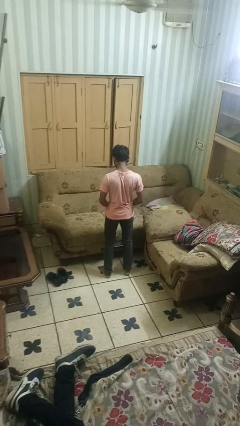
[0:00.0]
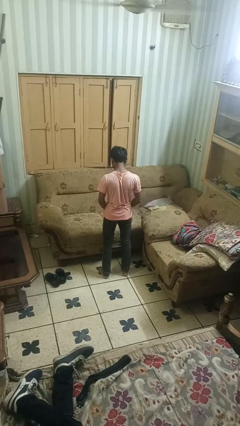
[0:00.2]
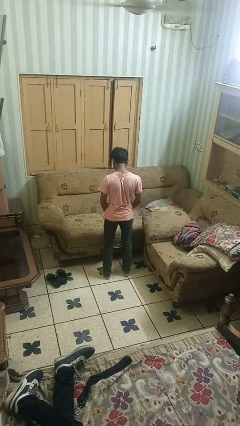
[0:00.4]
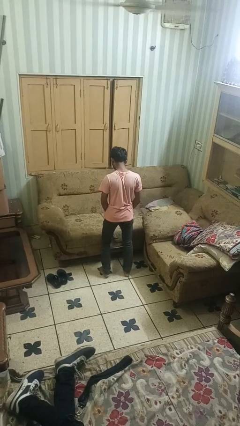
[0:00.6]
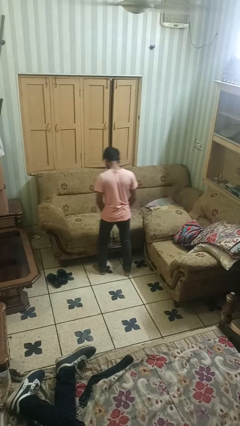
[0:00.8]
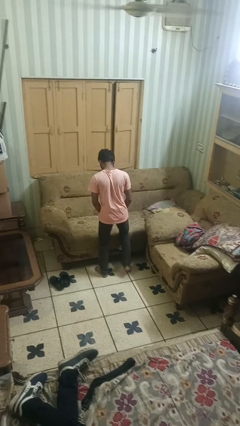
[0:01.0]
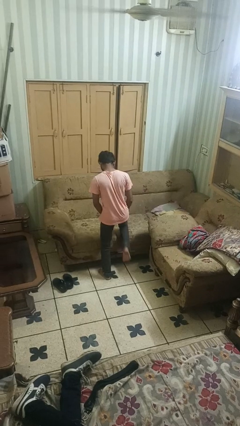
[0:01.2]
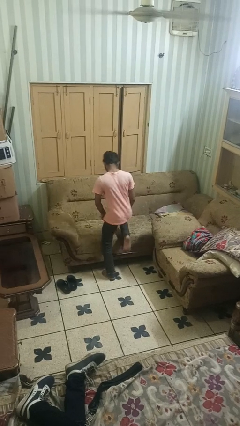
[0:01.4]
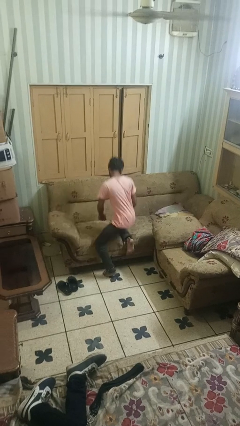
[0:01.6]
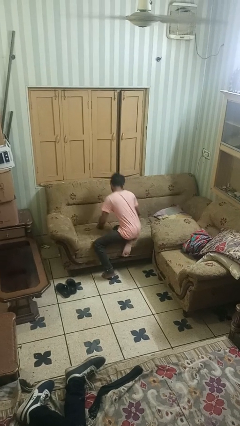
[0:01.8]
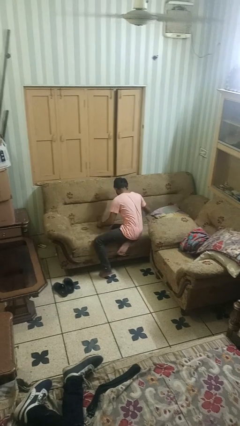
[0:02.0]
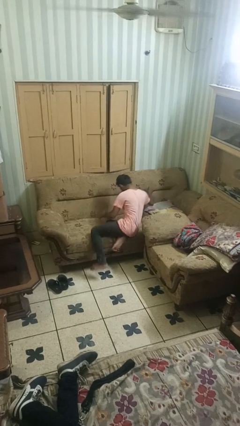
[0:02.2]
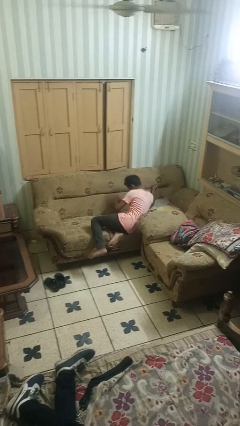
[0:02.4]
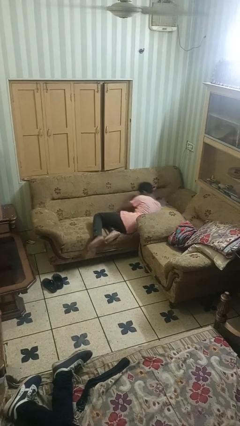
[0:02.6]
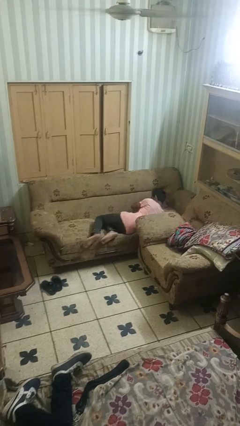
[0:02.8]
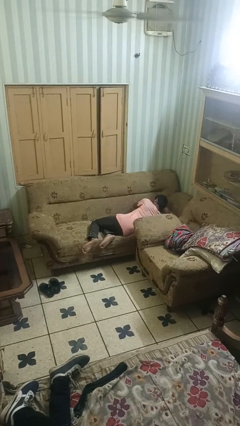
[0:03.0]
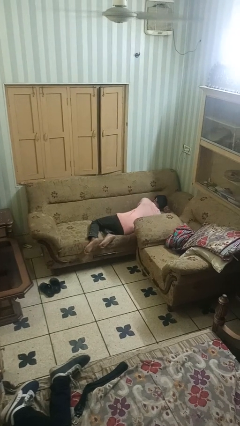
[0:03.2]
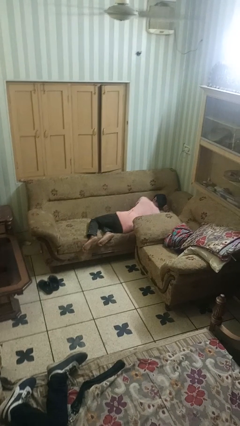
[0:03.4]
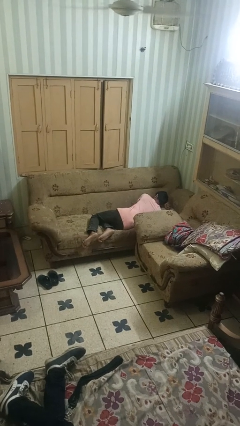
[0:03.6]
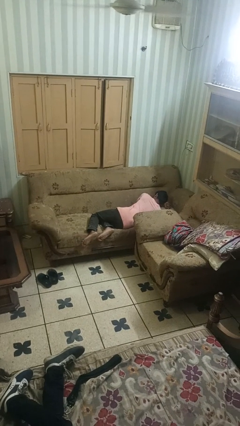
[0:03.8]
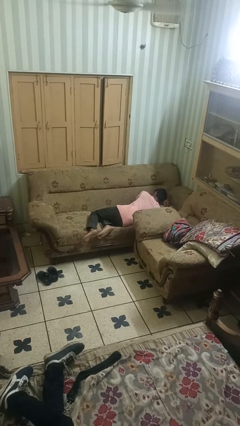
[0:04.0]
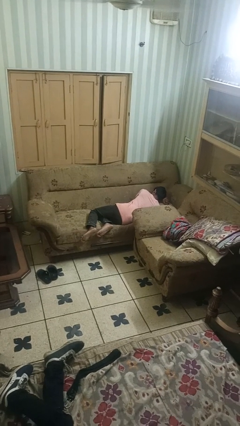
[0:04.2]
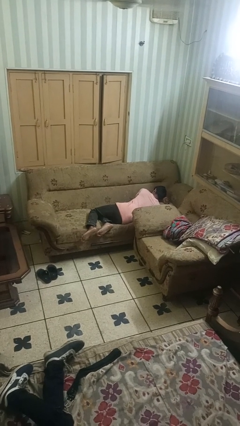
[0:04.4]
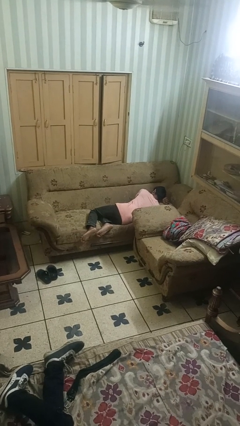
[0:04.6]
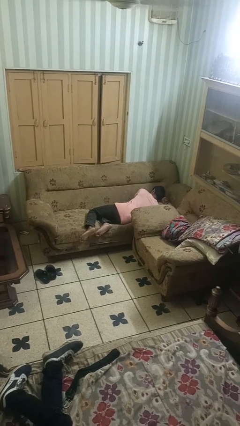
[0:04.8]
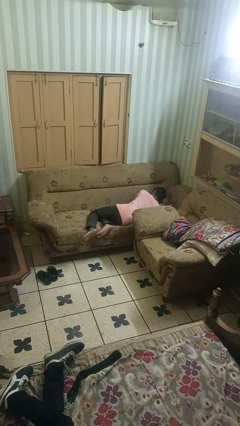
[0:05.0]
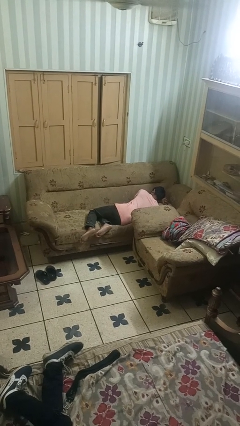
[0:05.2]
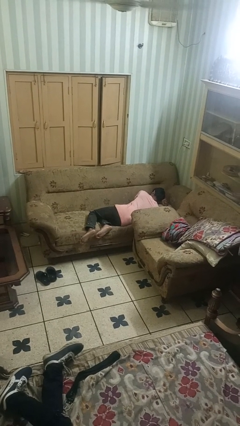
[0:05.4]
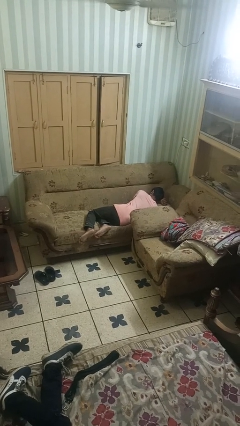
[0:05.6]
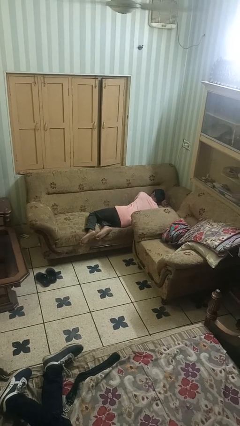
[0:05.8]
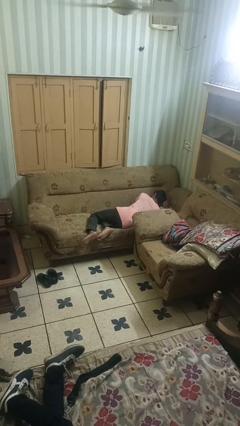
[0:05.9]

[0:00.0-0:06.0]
person lies down on couch

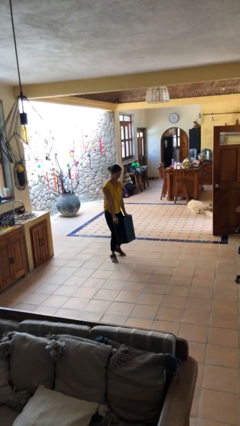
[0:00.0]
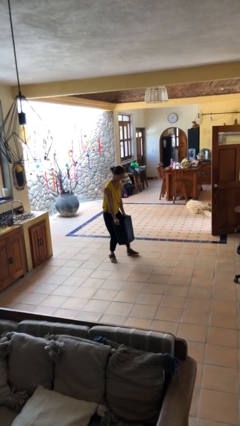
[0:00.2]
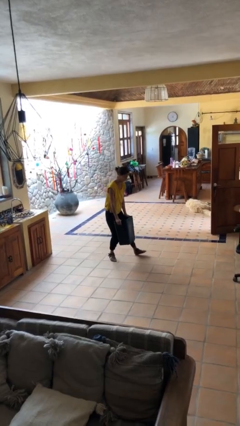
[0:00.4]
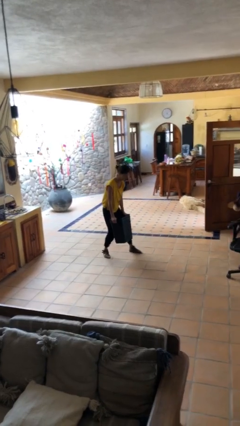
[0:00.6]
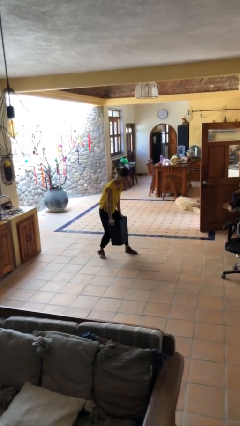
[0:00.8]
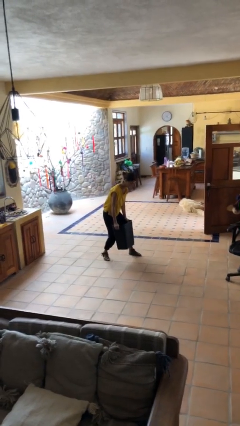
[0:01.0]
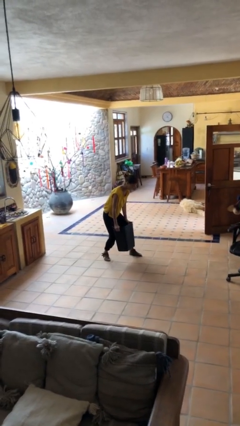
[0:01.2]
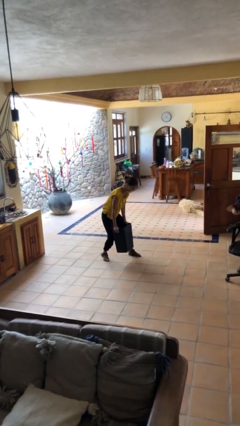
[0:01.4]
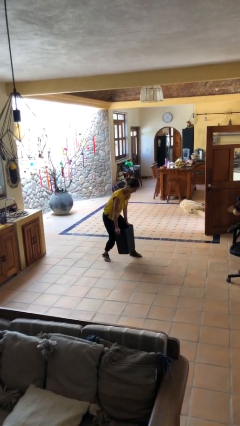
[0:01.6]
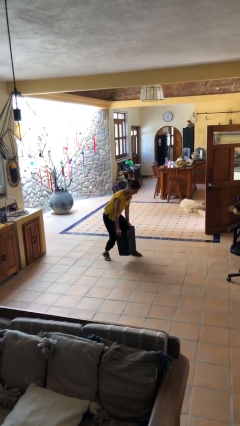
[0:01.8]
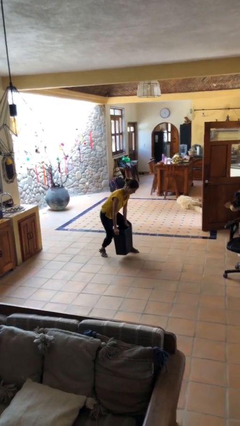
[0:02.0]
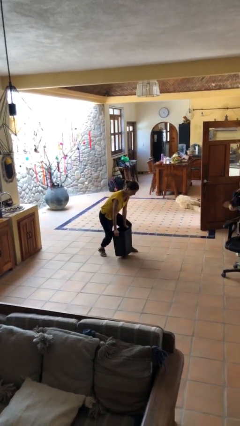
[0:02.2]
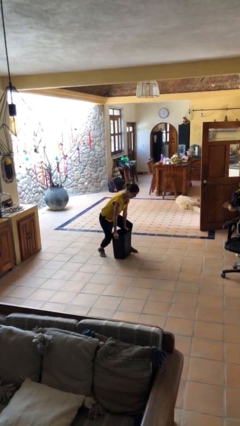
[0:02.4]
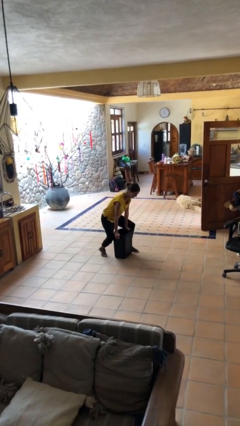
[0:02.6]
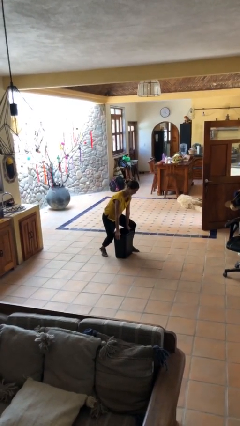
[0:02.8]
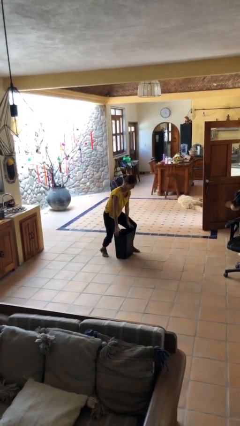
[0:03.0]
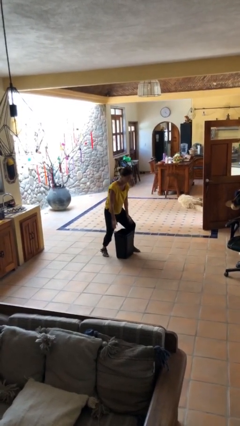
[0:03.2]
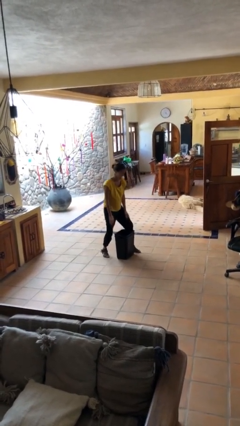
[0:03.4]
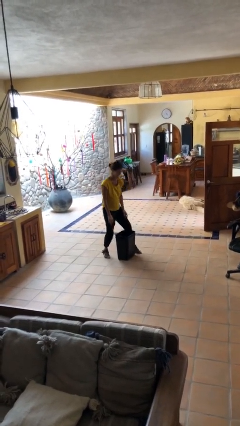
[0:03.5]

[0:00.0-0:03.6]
person puts down object on floor

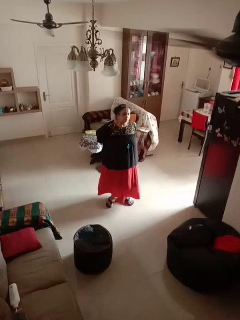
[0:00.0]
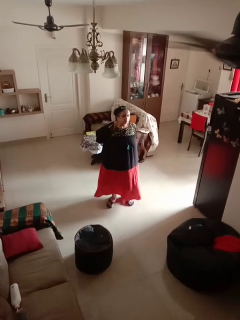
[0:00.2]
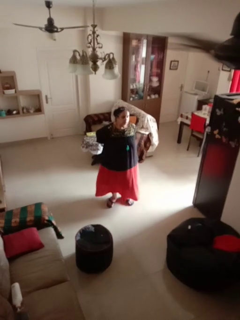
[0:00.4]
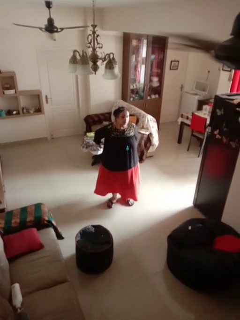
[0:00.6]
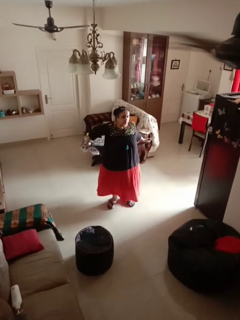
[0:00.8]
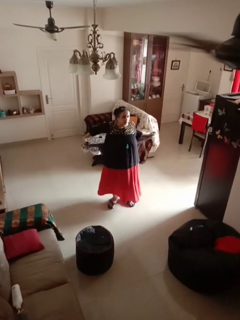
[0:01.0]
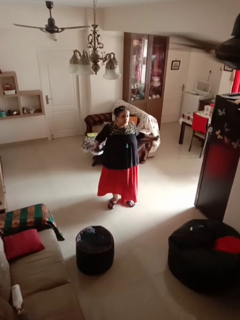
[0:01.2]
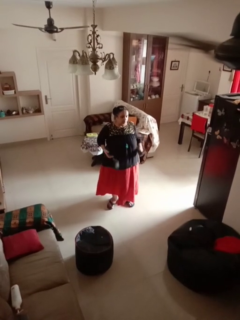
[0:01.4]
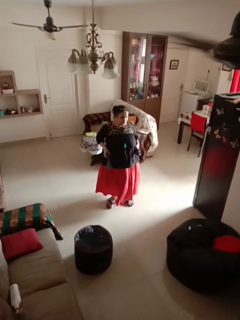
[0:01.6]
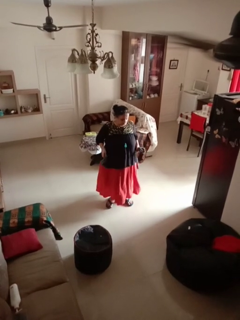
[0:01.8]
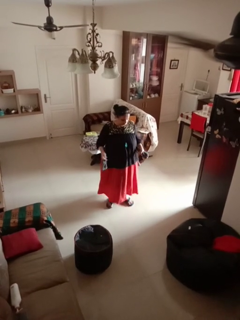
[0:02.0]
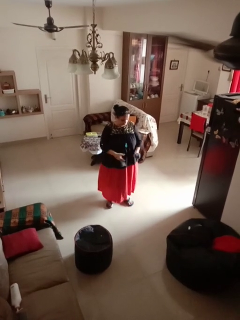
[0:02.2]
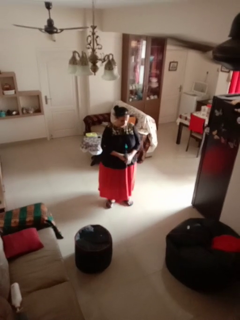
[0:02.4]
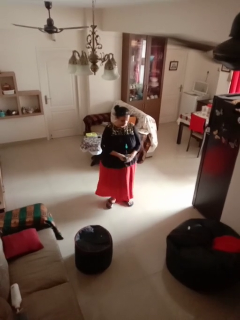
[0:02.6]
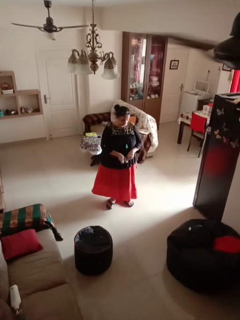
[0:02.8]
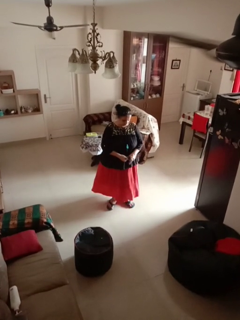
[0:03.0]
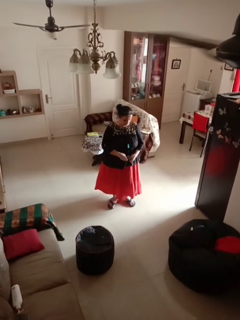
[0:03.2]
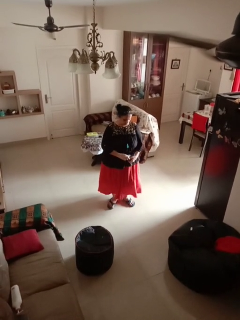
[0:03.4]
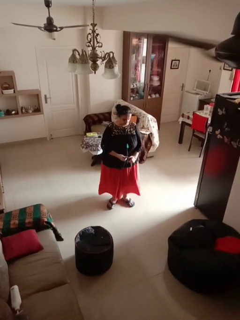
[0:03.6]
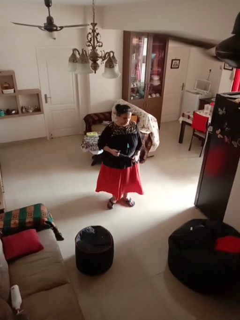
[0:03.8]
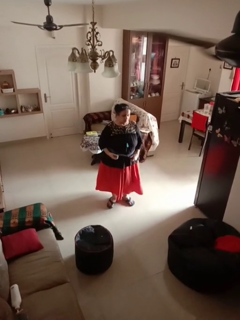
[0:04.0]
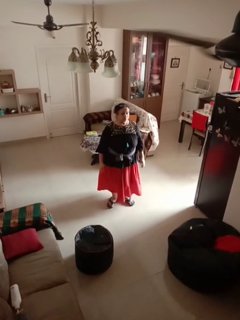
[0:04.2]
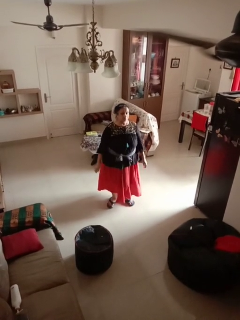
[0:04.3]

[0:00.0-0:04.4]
person ties jacket around waist

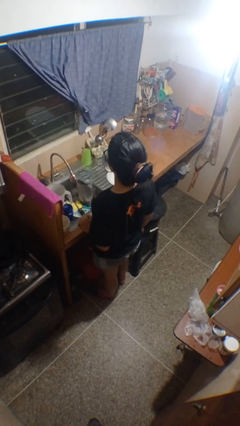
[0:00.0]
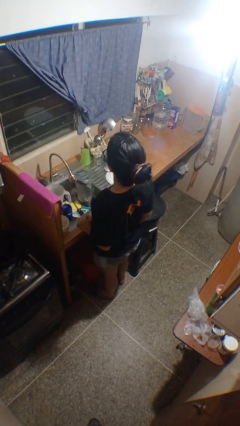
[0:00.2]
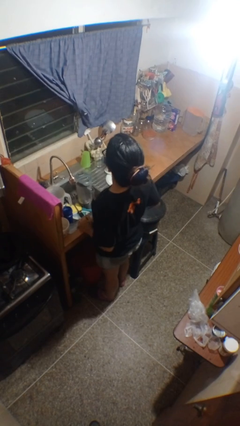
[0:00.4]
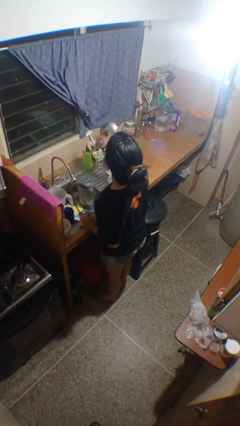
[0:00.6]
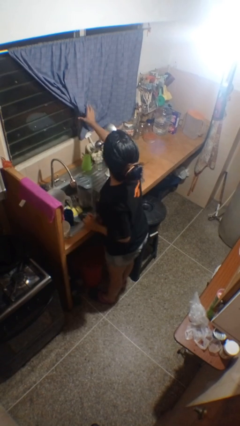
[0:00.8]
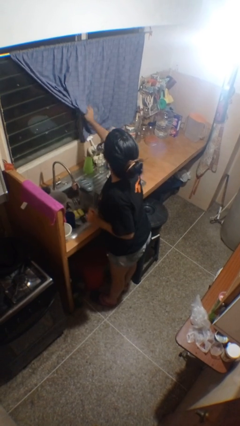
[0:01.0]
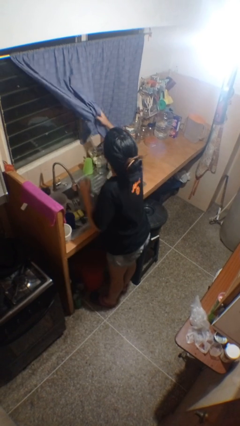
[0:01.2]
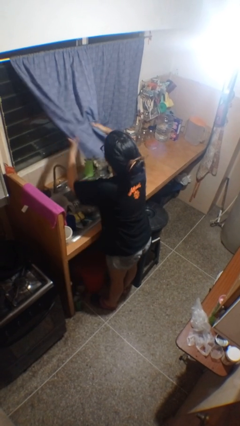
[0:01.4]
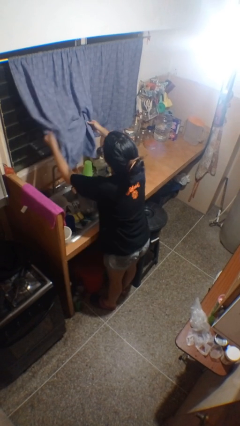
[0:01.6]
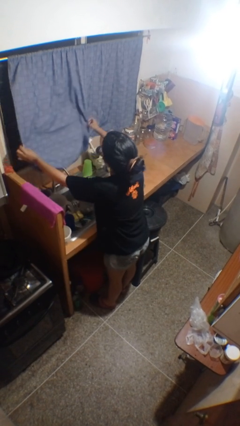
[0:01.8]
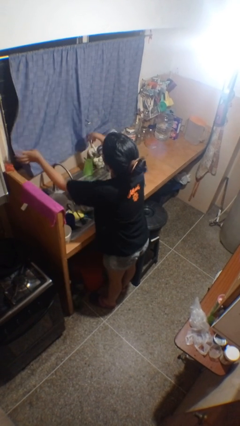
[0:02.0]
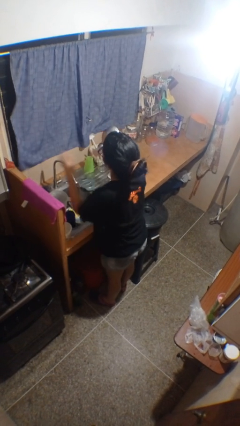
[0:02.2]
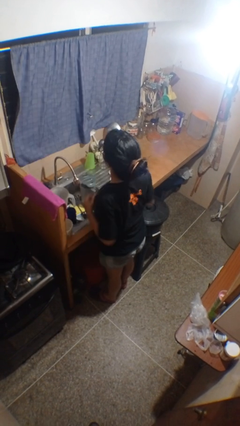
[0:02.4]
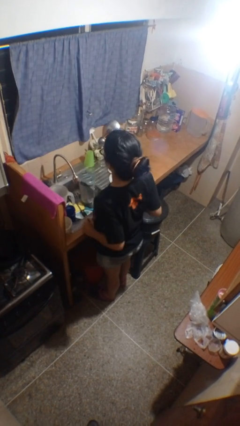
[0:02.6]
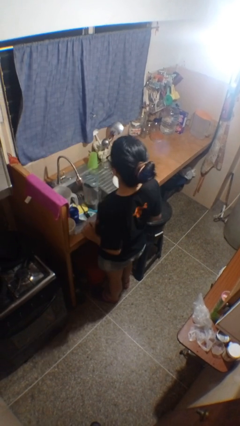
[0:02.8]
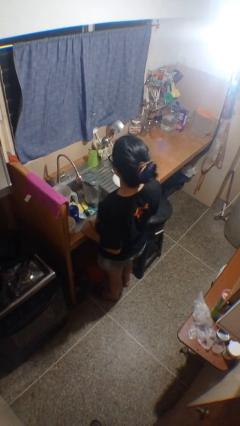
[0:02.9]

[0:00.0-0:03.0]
person closes curtains

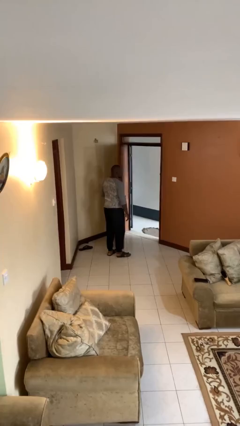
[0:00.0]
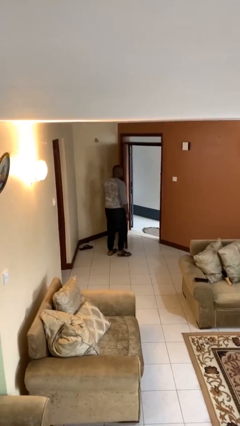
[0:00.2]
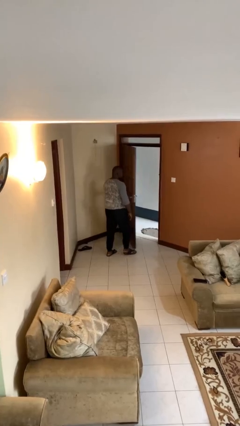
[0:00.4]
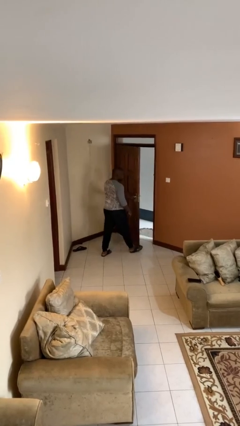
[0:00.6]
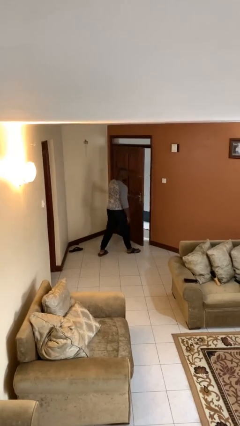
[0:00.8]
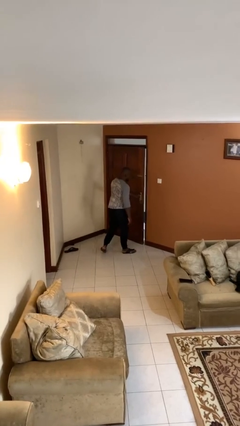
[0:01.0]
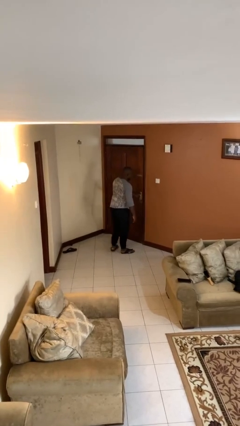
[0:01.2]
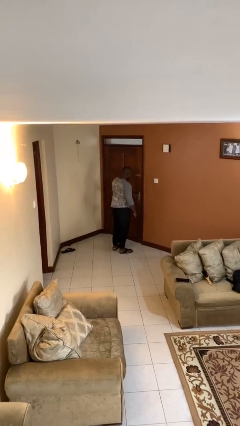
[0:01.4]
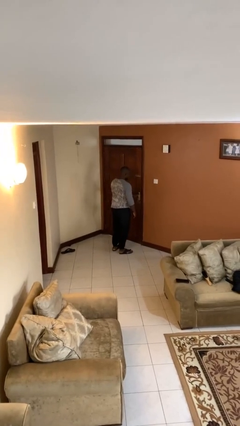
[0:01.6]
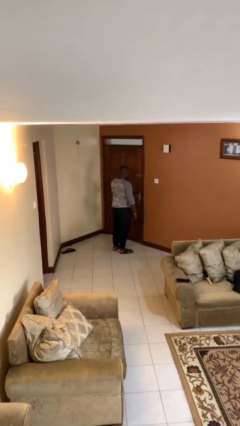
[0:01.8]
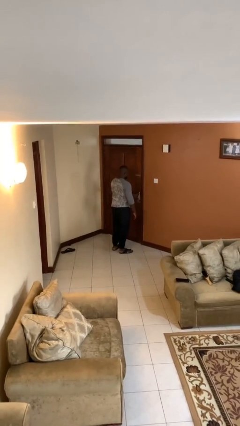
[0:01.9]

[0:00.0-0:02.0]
person closes facility door

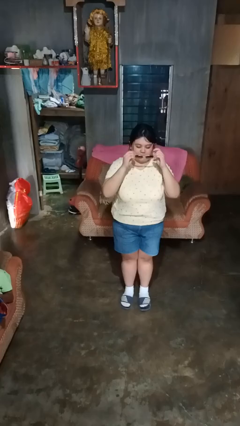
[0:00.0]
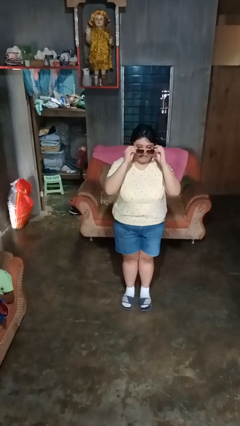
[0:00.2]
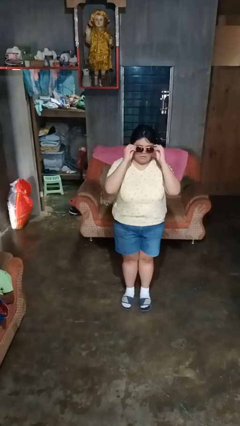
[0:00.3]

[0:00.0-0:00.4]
person puts on sunglasses
